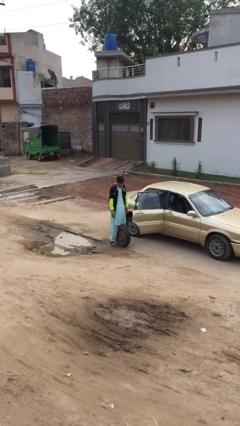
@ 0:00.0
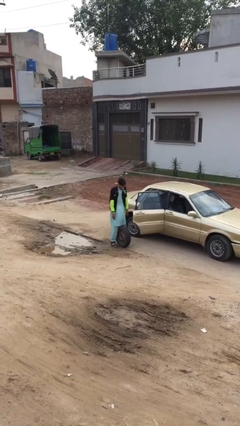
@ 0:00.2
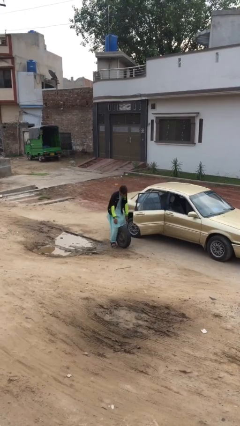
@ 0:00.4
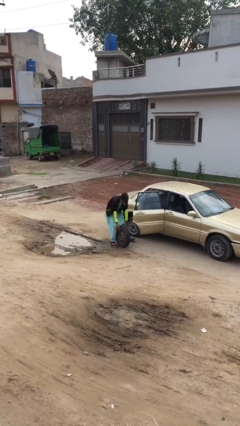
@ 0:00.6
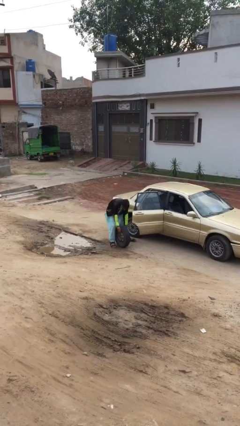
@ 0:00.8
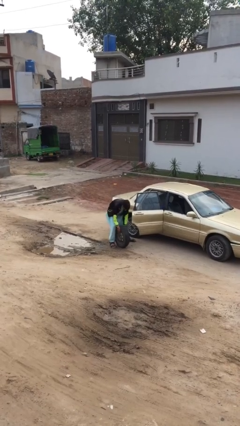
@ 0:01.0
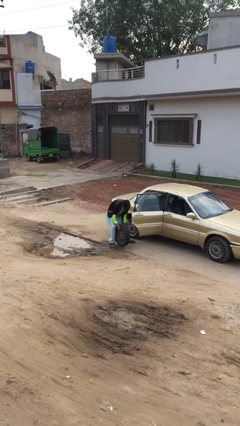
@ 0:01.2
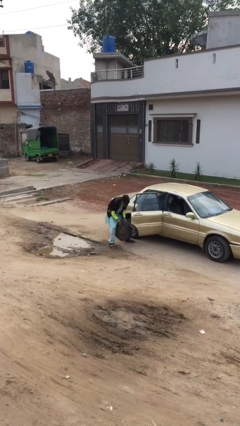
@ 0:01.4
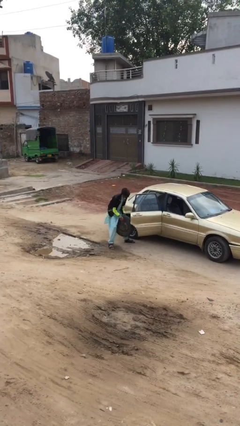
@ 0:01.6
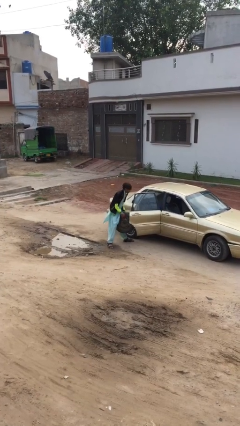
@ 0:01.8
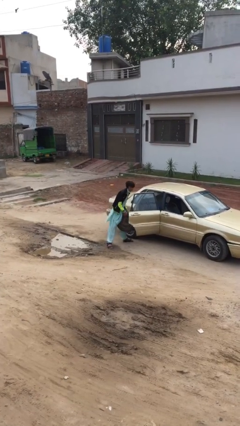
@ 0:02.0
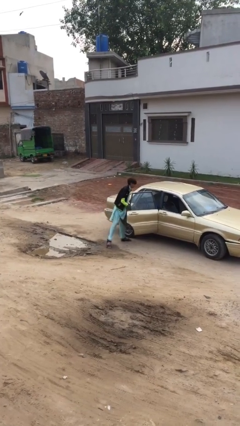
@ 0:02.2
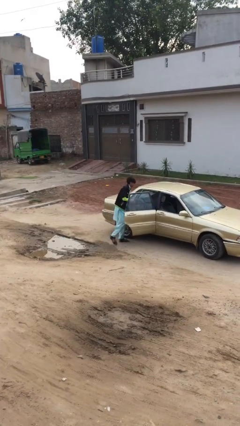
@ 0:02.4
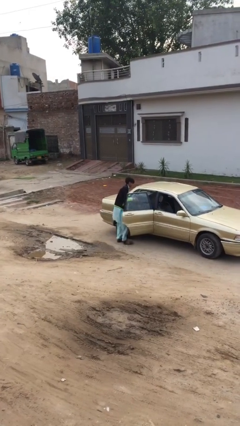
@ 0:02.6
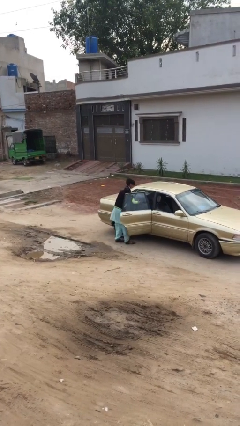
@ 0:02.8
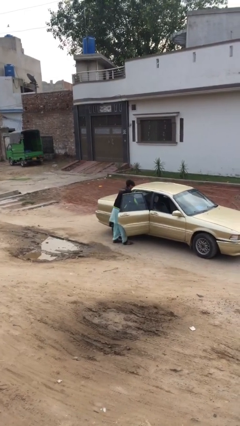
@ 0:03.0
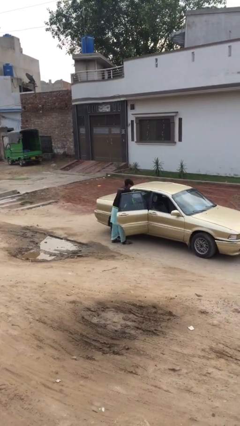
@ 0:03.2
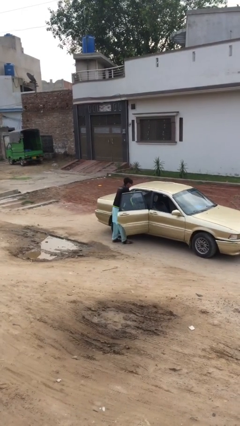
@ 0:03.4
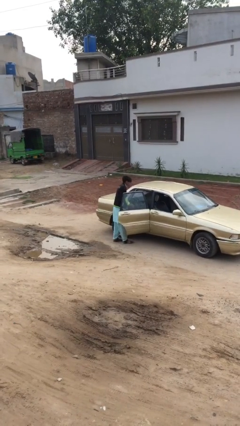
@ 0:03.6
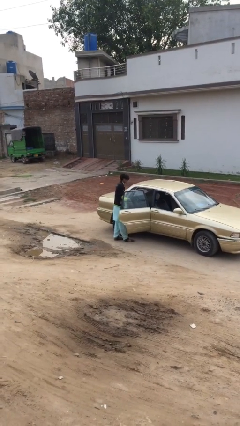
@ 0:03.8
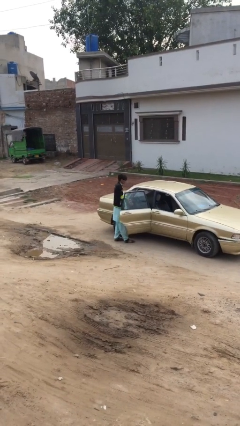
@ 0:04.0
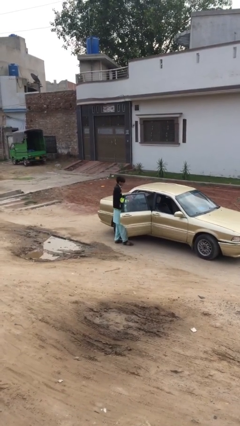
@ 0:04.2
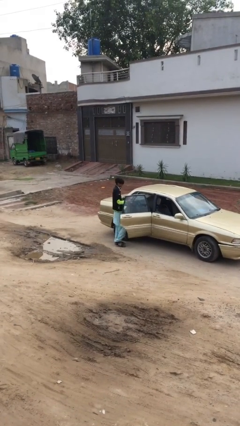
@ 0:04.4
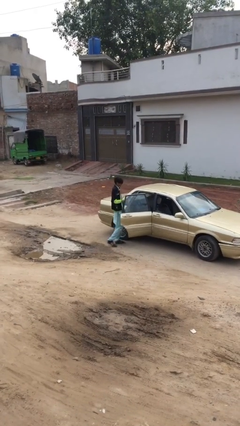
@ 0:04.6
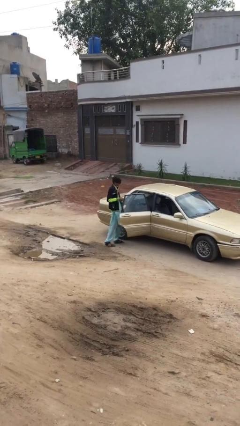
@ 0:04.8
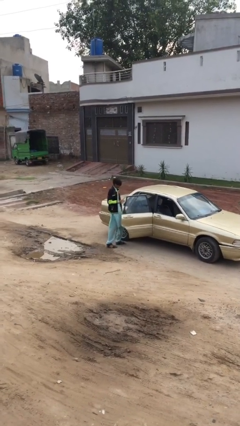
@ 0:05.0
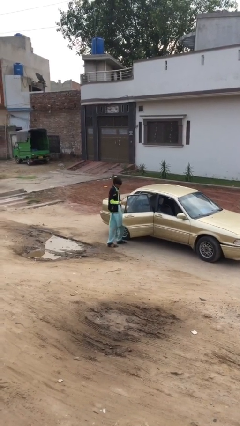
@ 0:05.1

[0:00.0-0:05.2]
person loads car

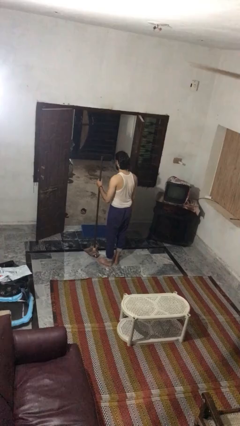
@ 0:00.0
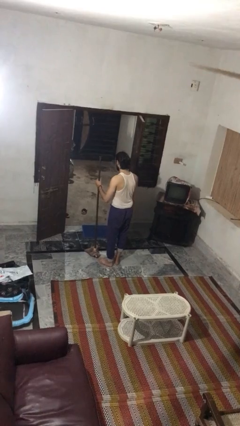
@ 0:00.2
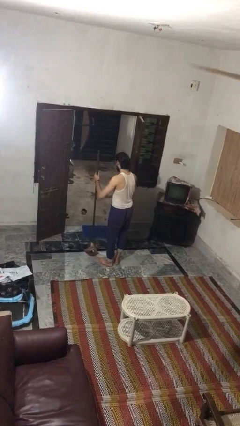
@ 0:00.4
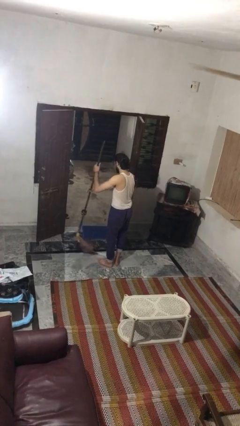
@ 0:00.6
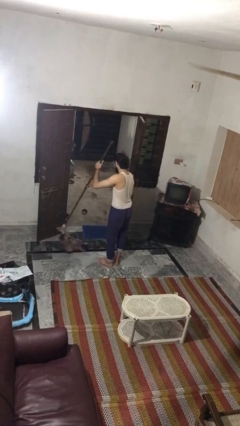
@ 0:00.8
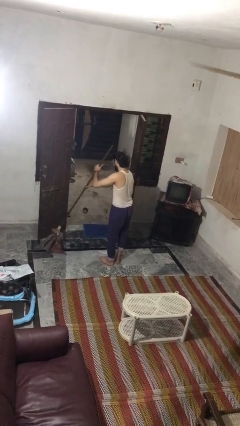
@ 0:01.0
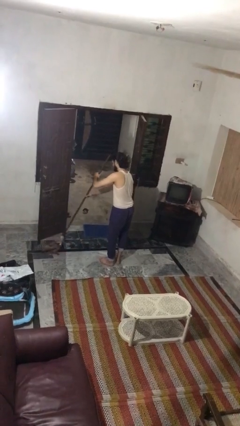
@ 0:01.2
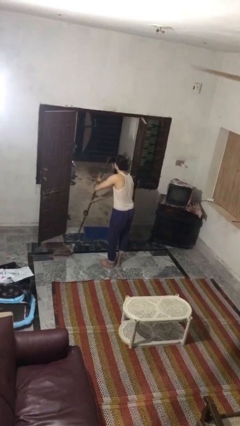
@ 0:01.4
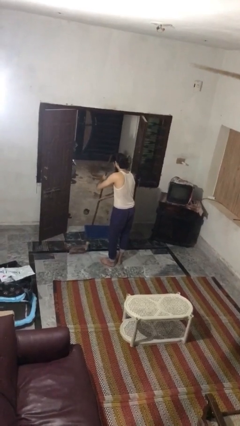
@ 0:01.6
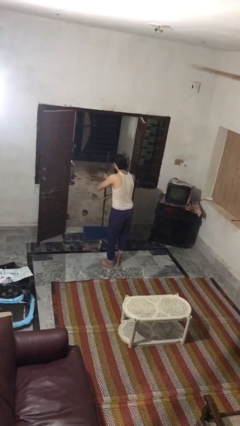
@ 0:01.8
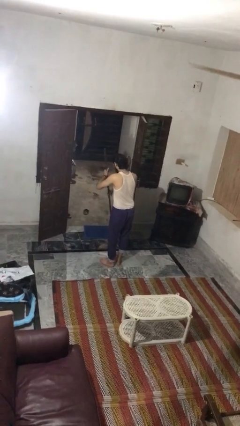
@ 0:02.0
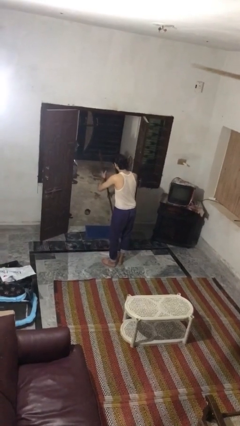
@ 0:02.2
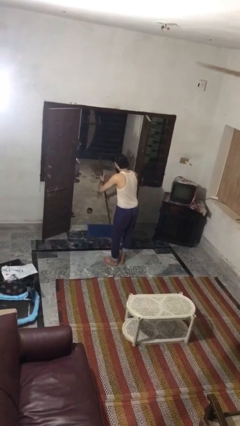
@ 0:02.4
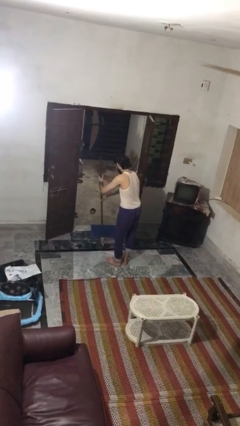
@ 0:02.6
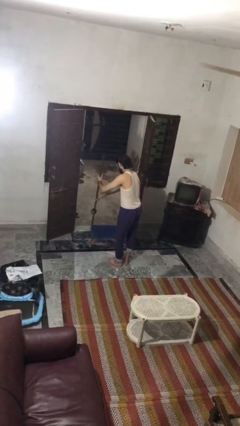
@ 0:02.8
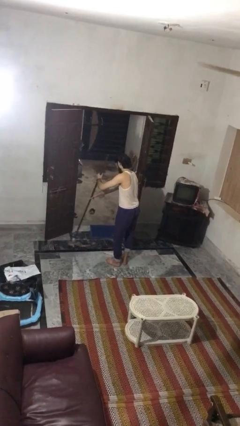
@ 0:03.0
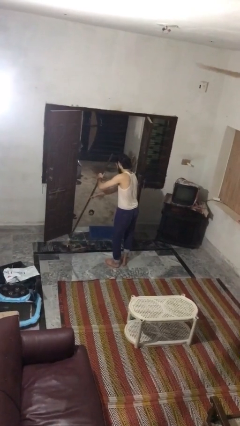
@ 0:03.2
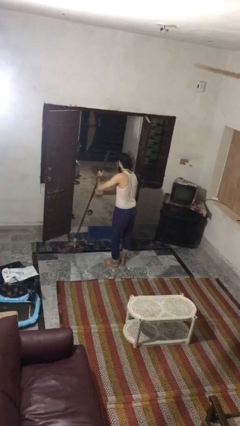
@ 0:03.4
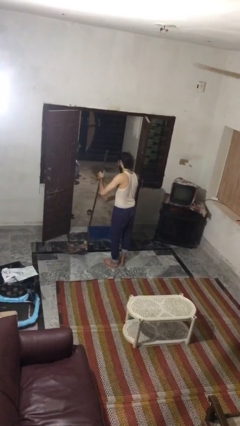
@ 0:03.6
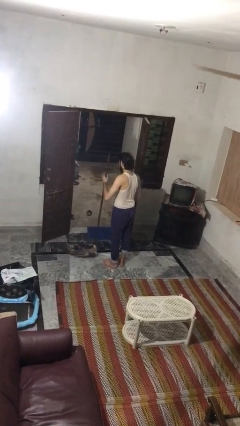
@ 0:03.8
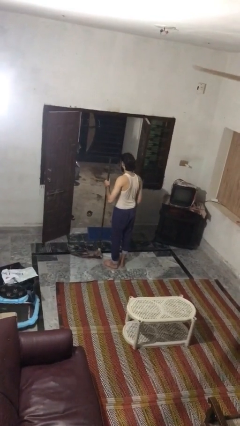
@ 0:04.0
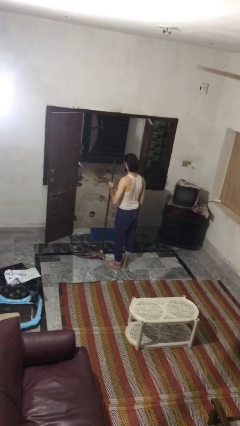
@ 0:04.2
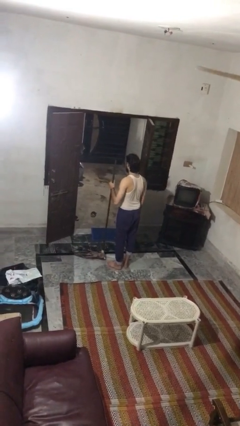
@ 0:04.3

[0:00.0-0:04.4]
person mops

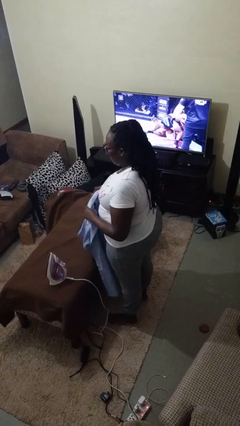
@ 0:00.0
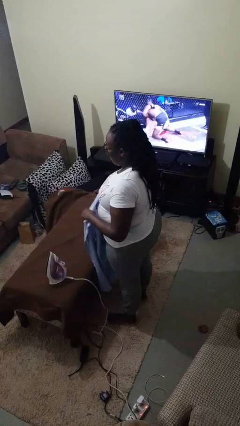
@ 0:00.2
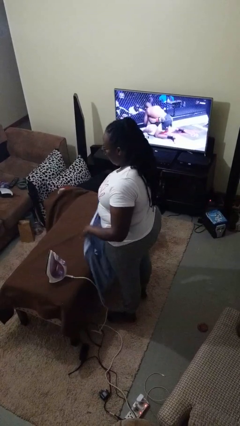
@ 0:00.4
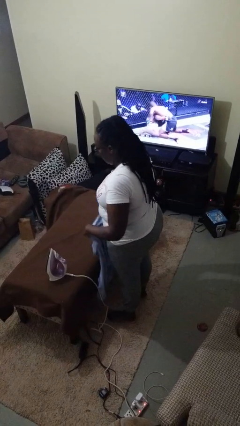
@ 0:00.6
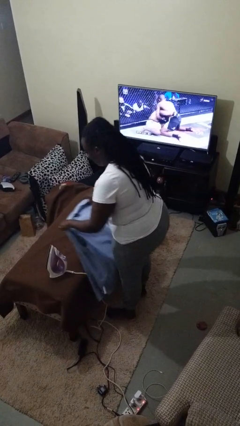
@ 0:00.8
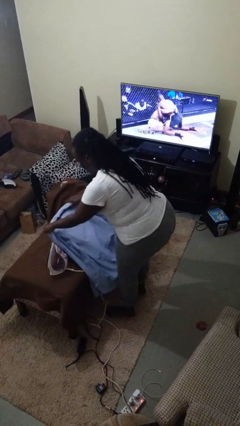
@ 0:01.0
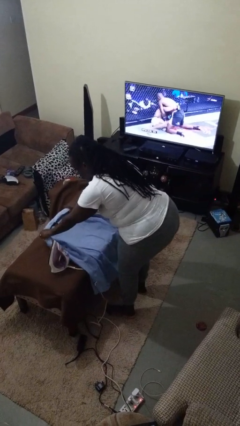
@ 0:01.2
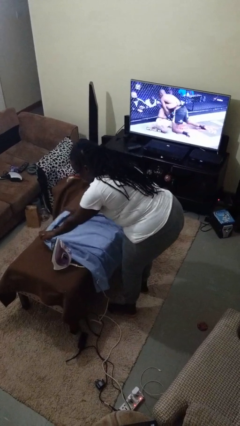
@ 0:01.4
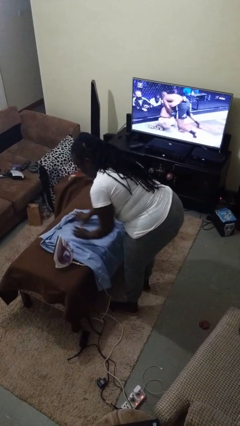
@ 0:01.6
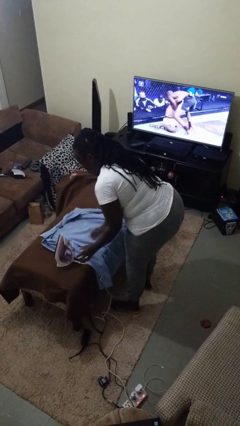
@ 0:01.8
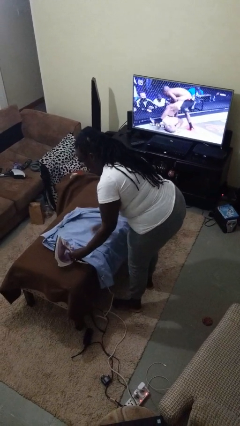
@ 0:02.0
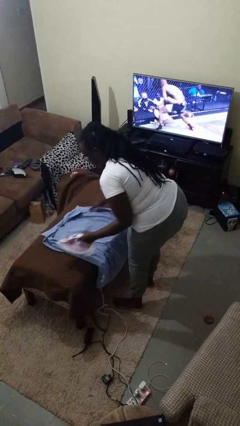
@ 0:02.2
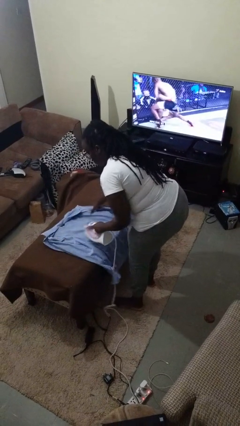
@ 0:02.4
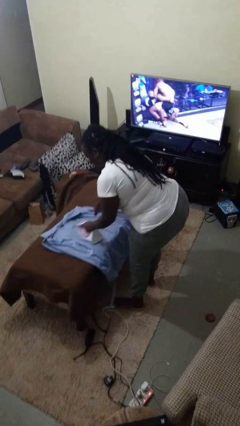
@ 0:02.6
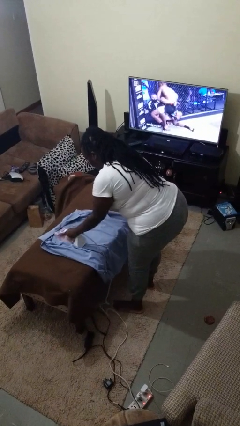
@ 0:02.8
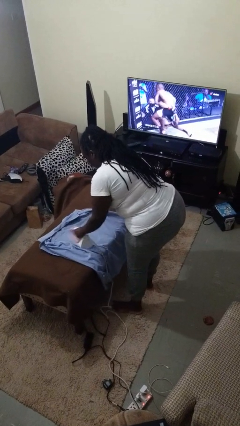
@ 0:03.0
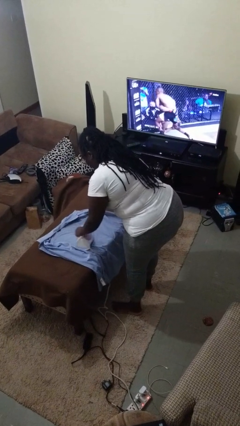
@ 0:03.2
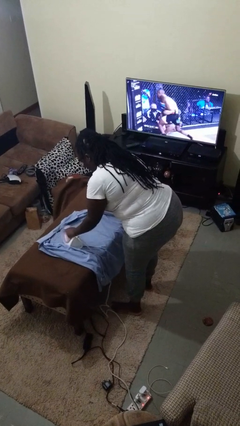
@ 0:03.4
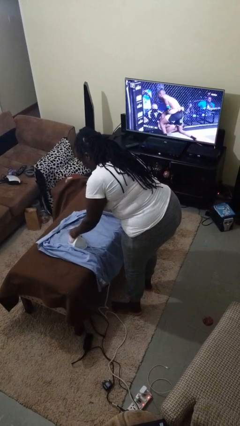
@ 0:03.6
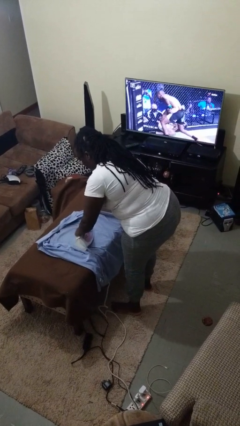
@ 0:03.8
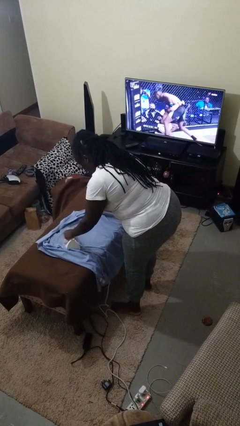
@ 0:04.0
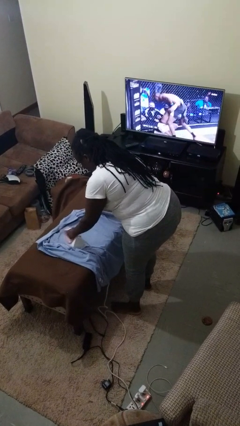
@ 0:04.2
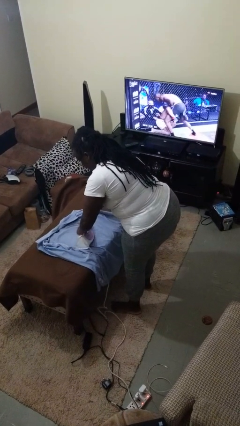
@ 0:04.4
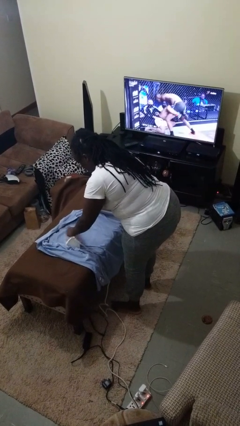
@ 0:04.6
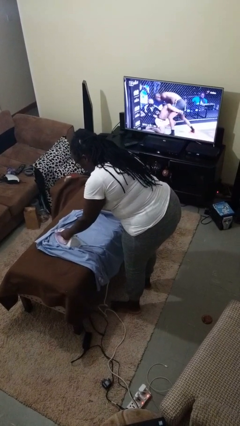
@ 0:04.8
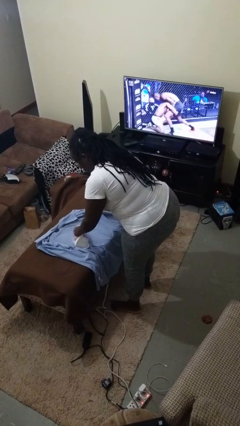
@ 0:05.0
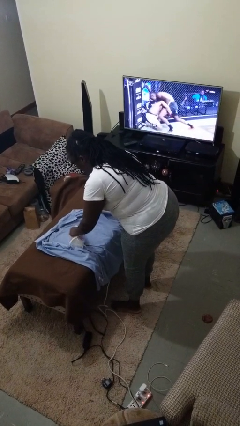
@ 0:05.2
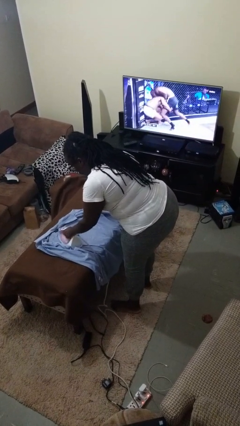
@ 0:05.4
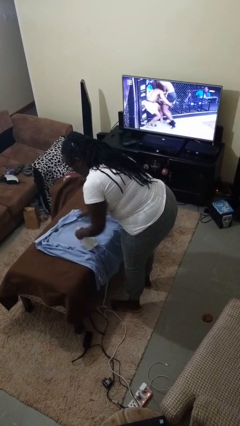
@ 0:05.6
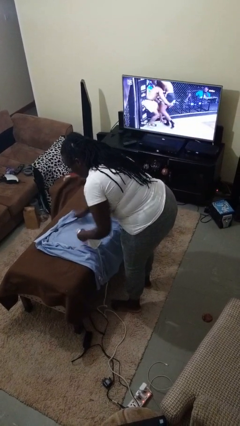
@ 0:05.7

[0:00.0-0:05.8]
person irons clothes

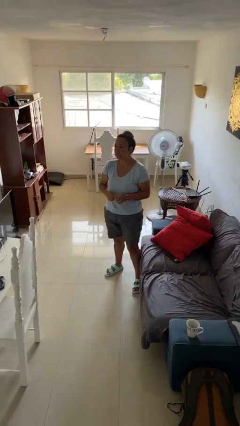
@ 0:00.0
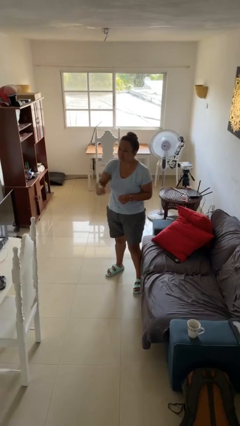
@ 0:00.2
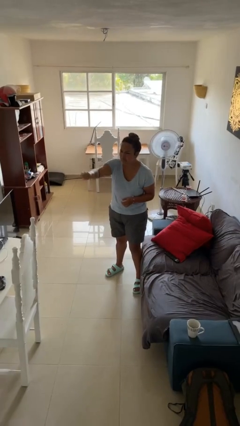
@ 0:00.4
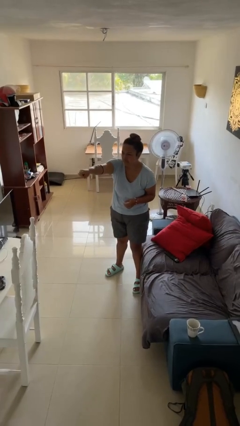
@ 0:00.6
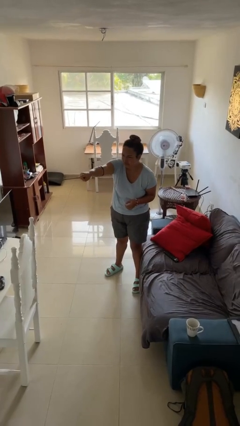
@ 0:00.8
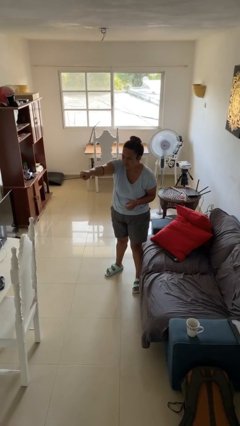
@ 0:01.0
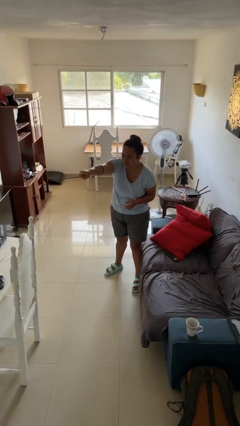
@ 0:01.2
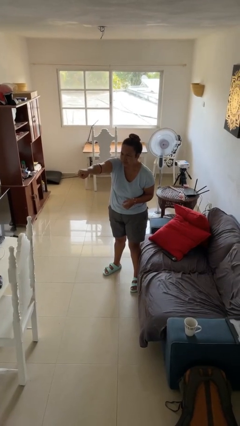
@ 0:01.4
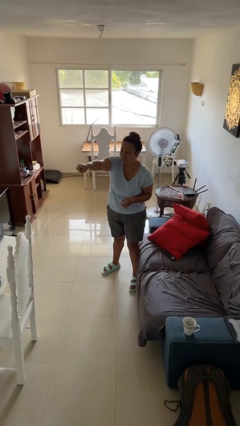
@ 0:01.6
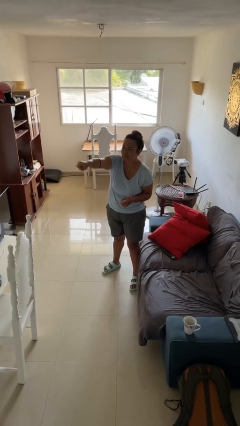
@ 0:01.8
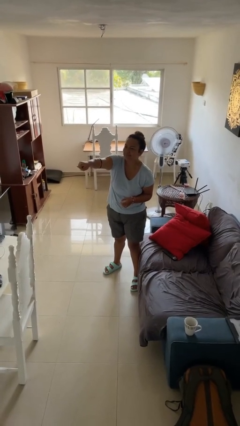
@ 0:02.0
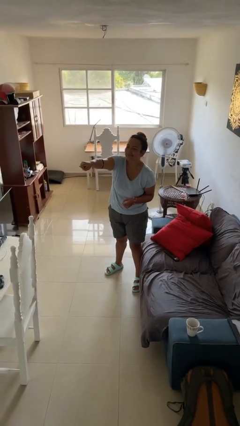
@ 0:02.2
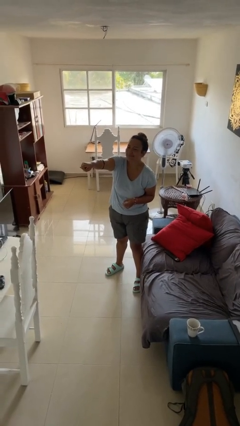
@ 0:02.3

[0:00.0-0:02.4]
person points at person
